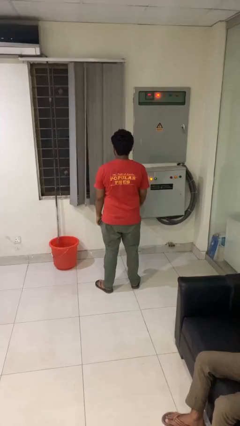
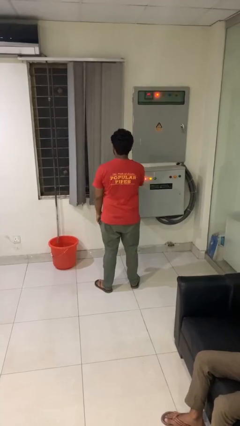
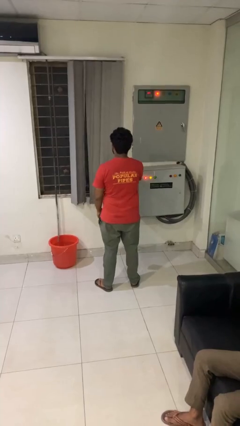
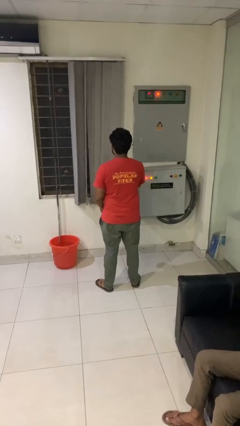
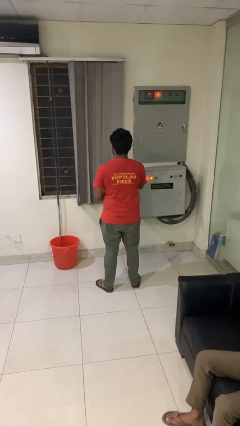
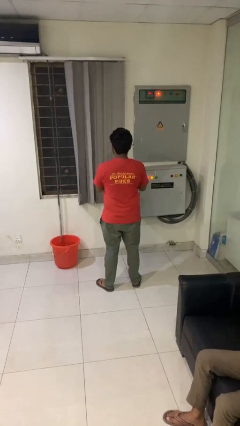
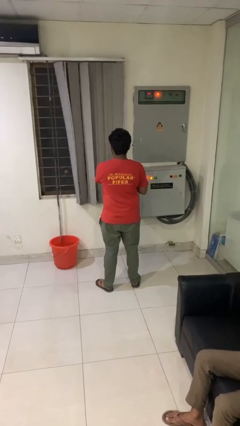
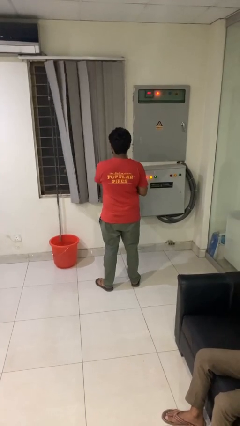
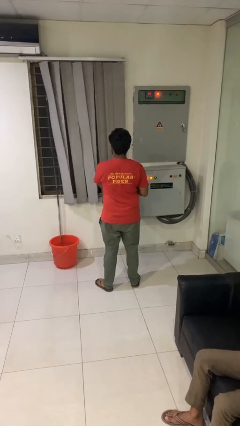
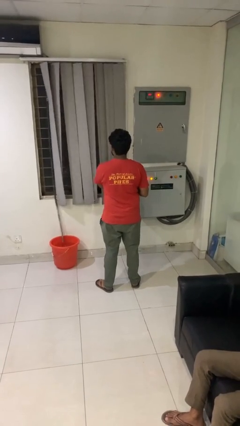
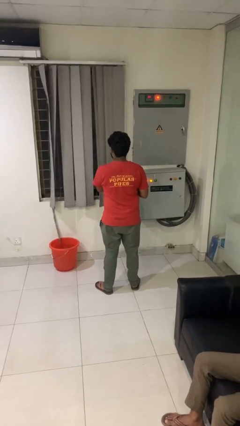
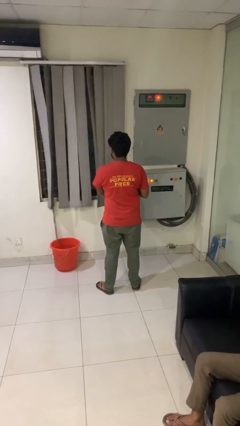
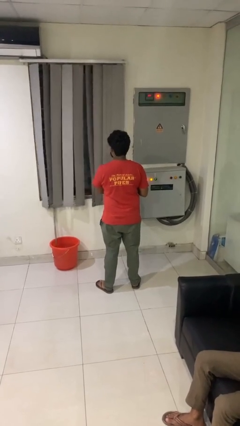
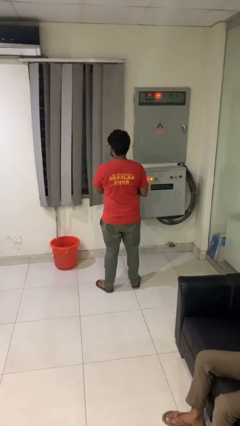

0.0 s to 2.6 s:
person closes curtains

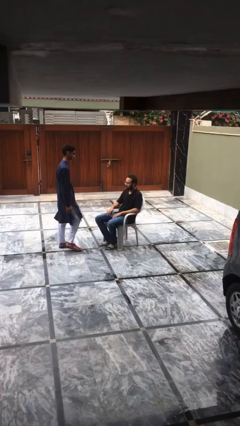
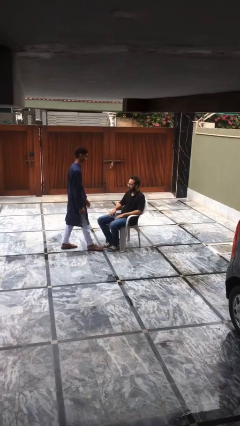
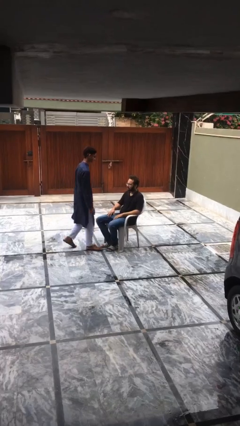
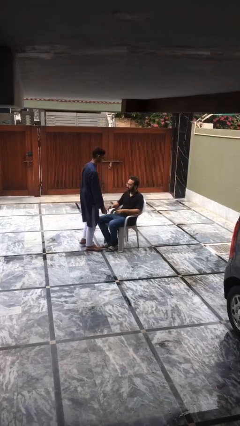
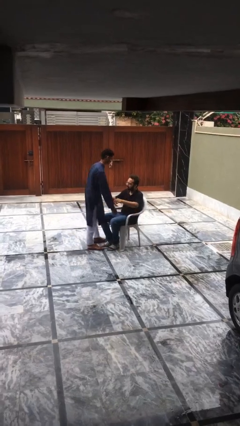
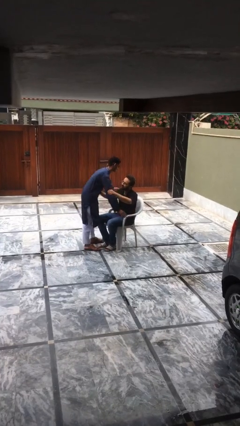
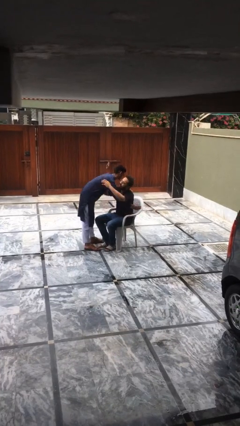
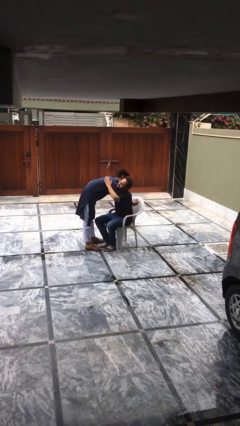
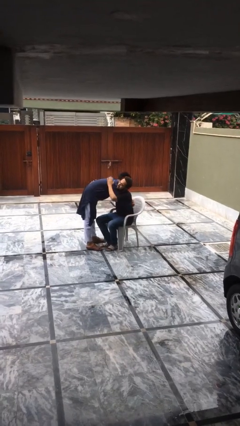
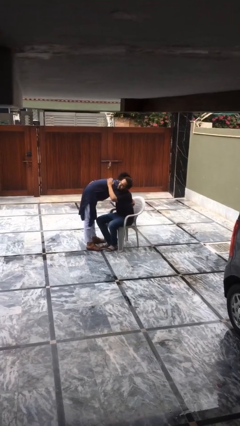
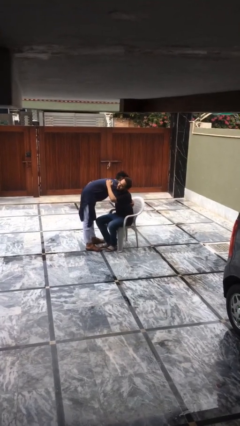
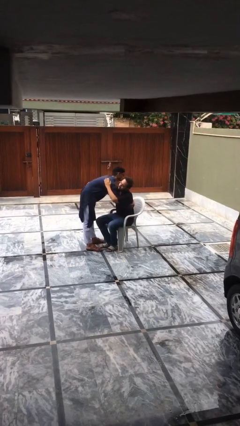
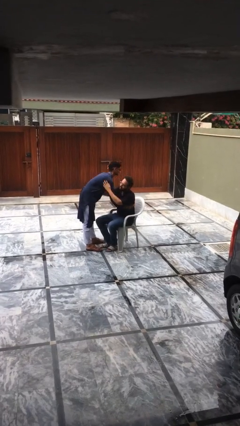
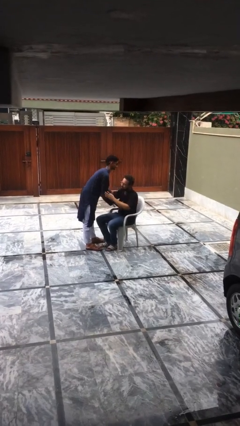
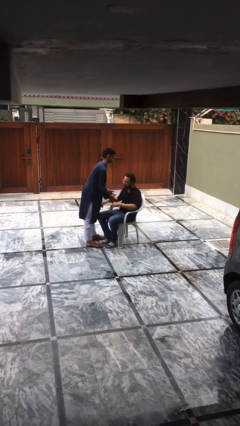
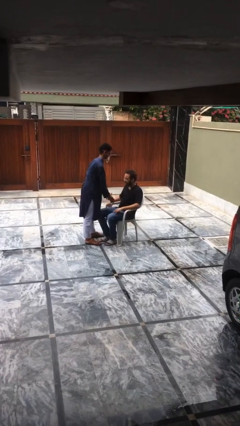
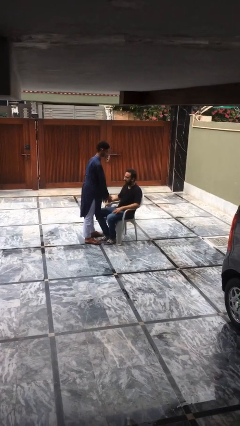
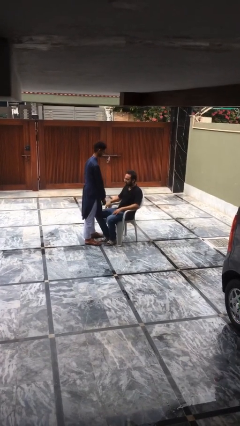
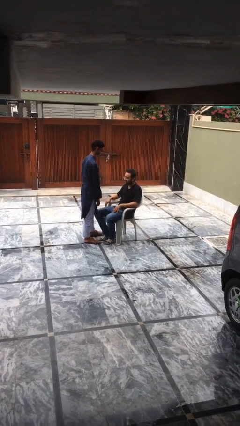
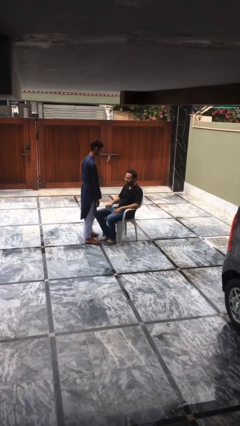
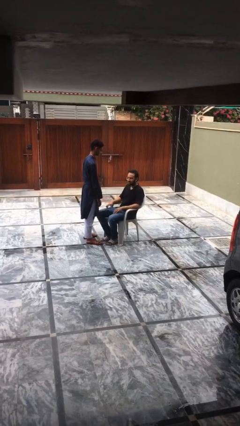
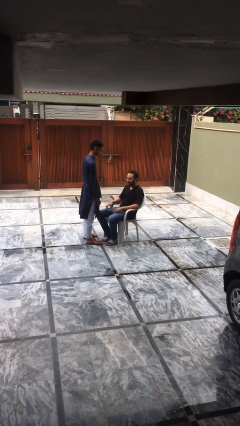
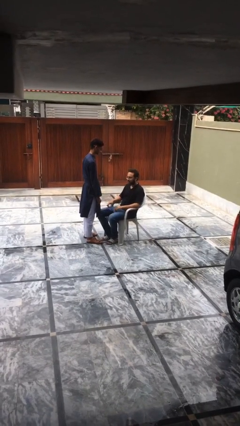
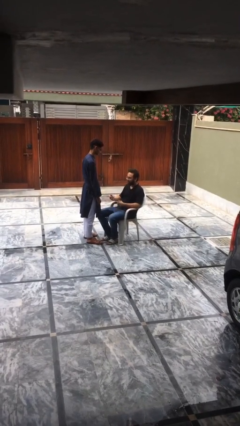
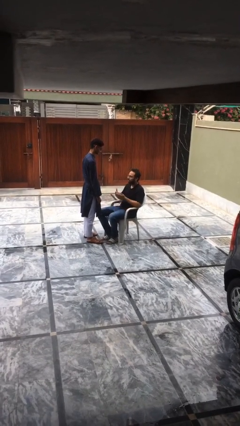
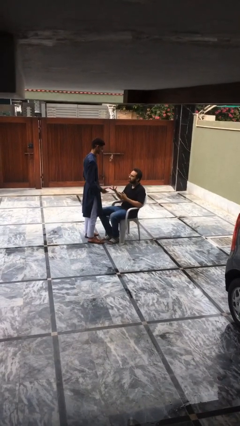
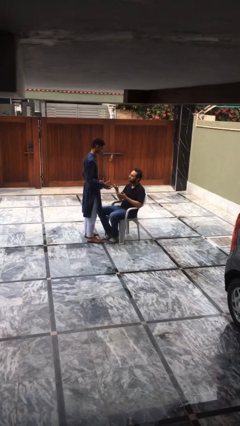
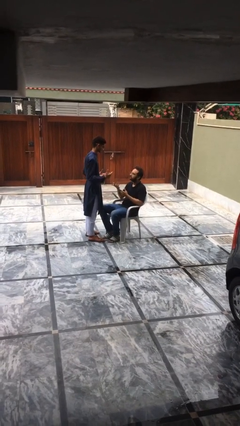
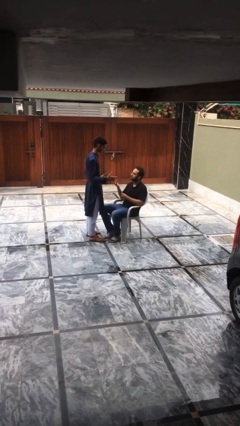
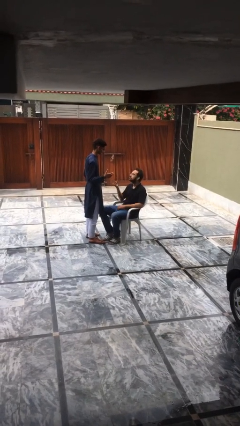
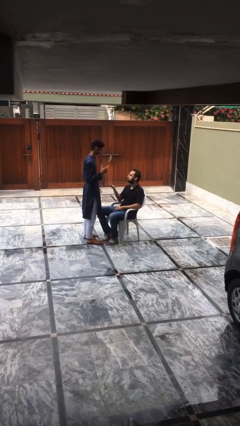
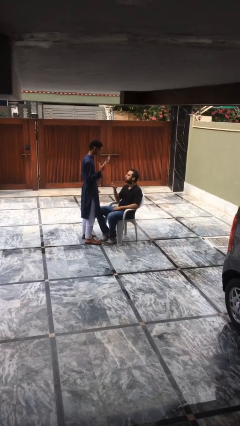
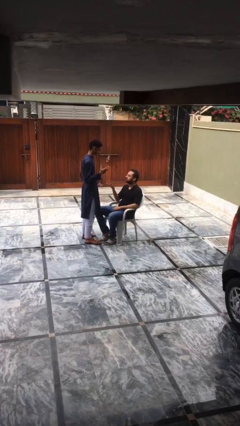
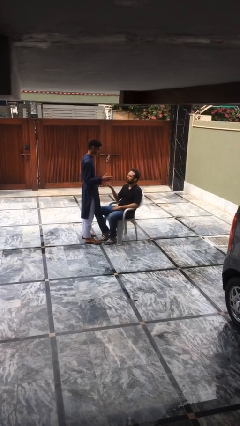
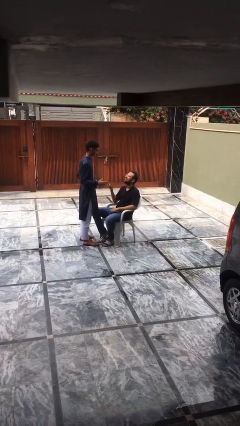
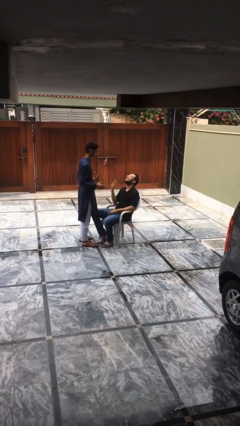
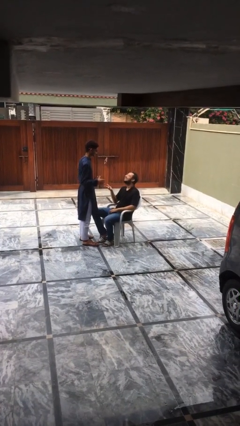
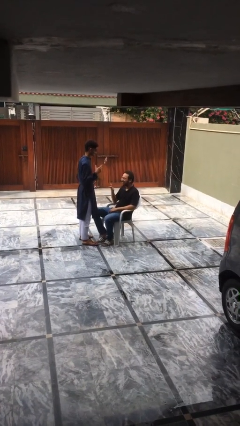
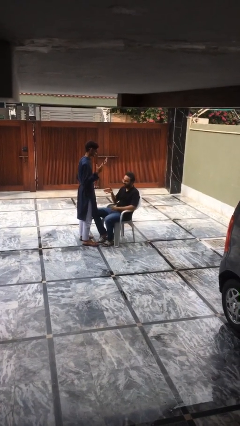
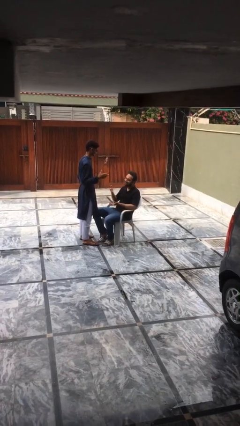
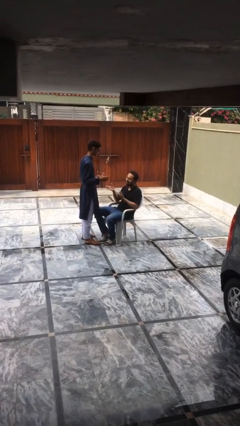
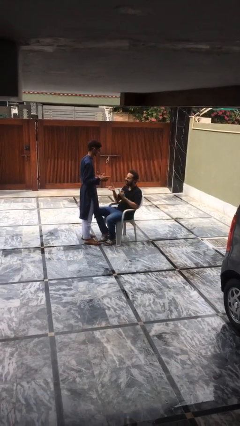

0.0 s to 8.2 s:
person embraces person

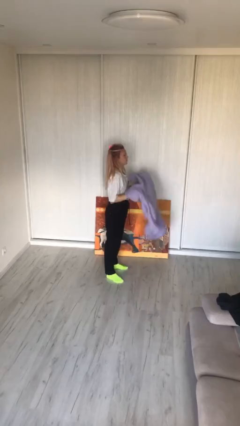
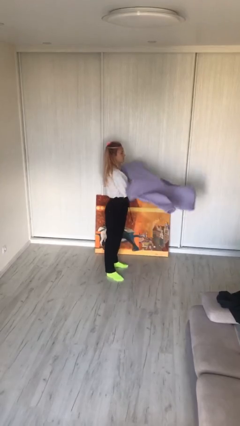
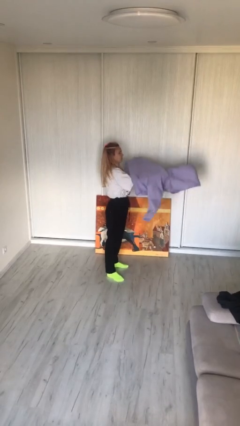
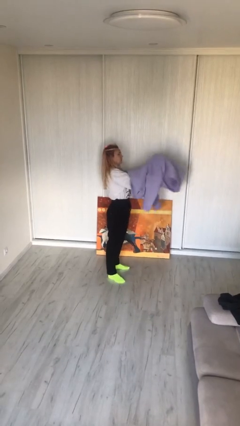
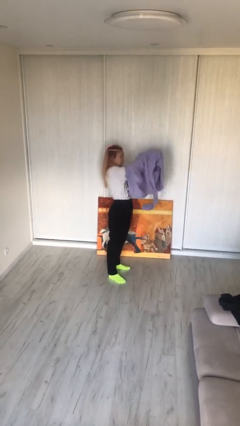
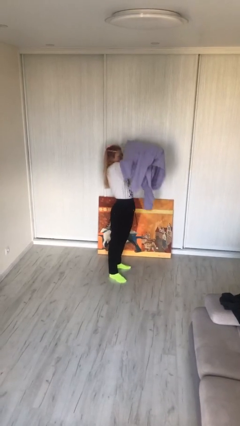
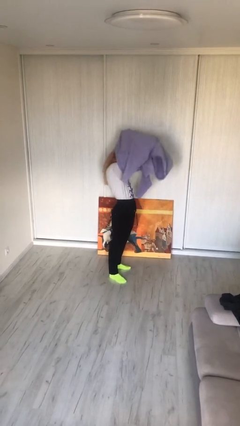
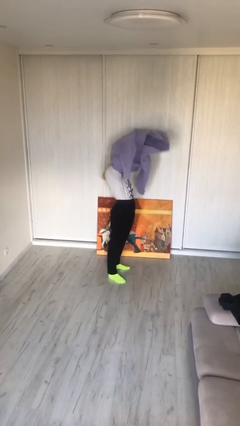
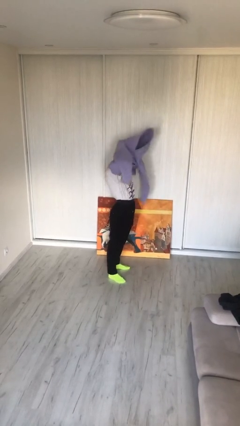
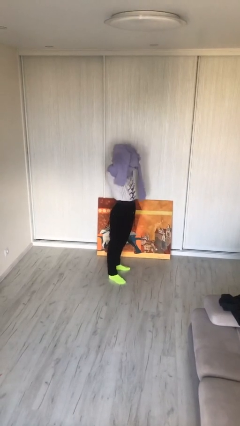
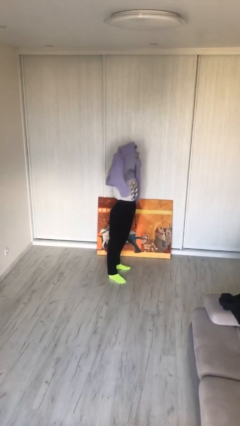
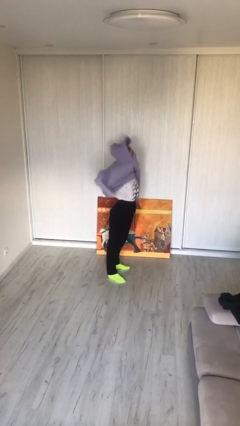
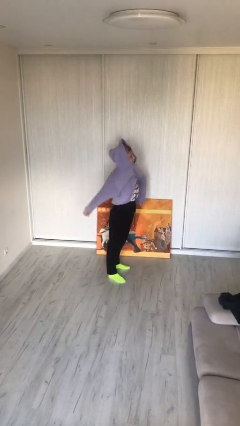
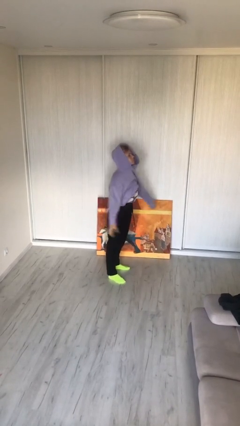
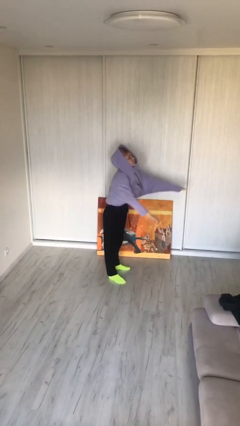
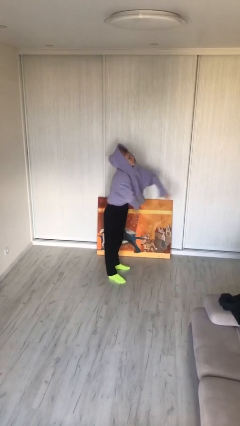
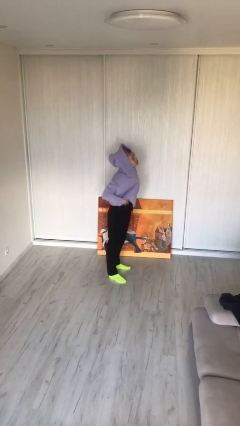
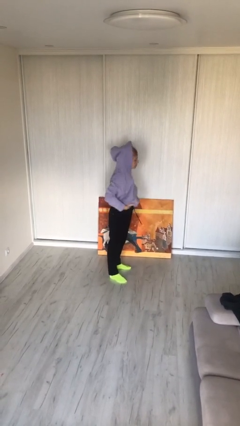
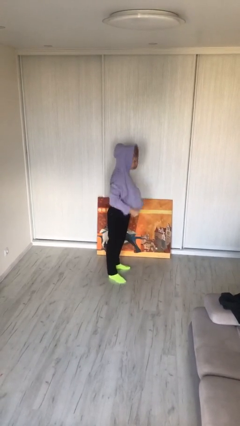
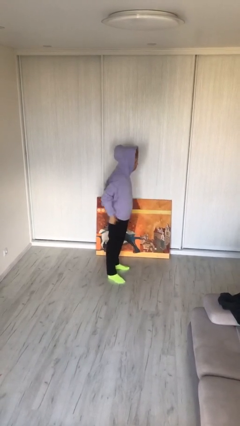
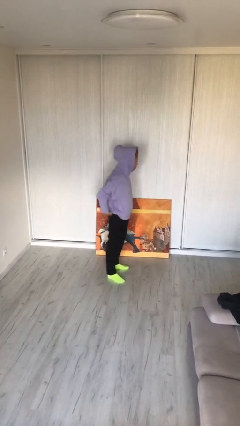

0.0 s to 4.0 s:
person puts on hoodie

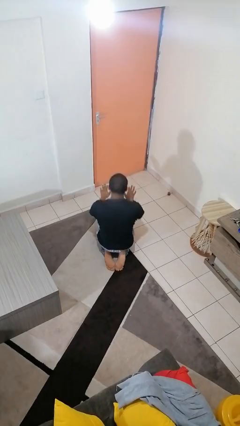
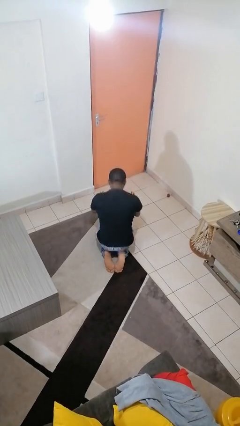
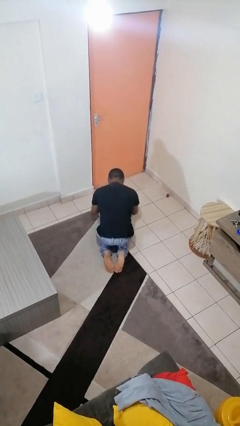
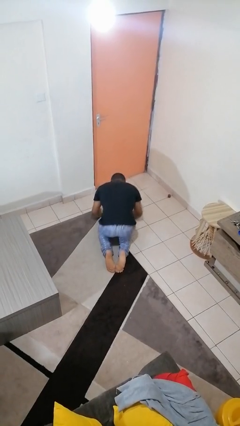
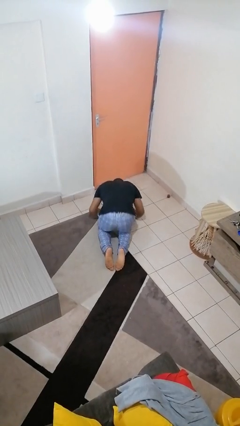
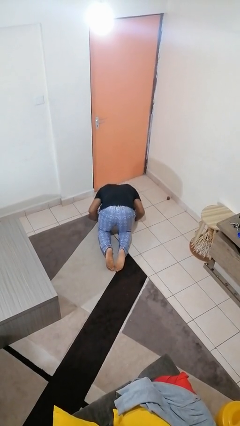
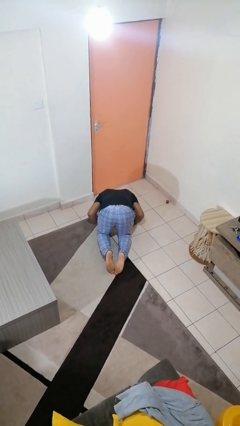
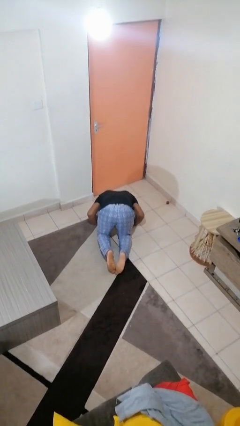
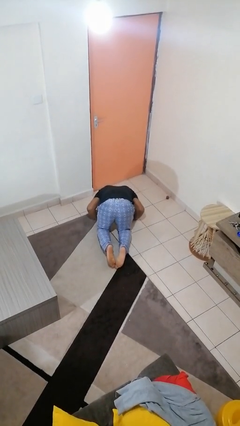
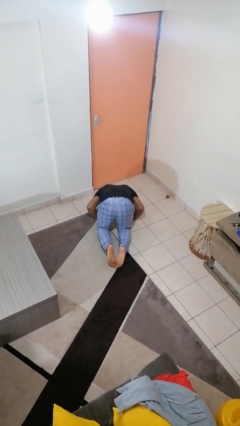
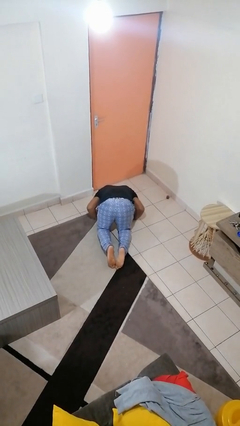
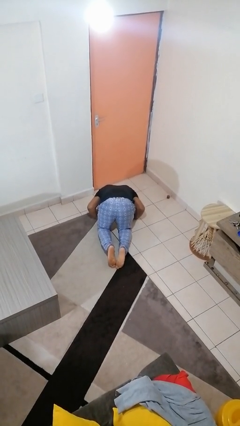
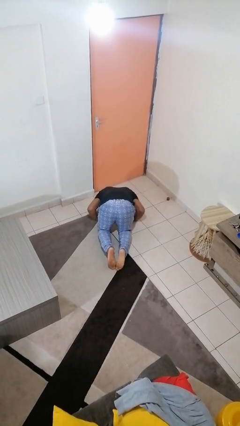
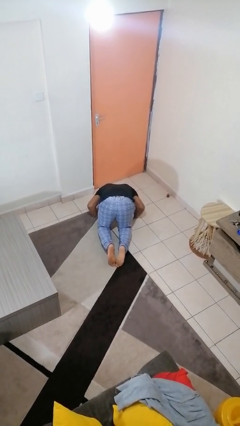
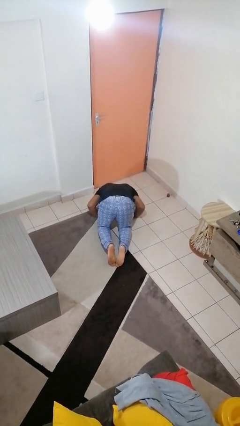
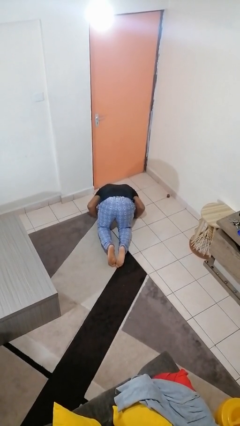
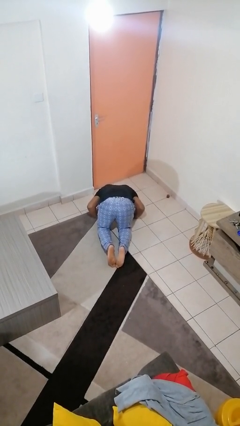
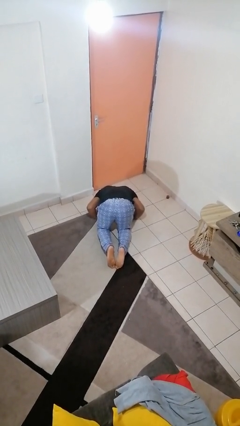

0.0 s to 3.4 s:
person prays
